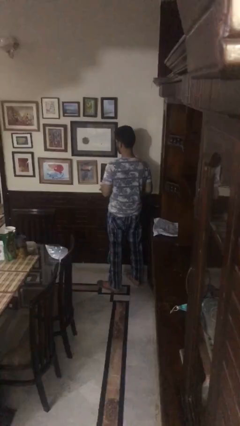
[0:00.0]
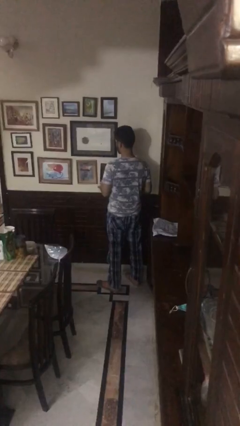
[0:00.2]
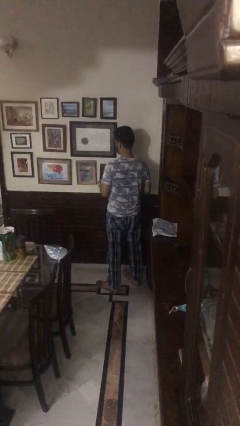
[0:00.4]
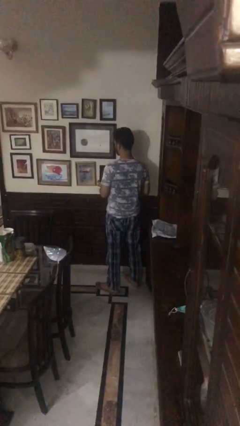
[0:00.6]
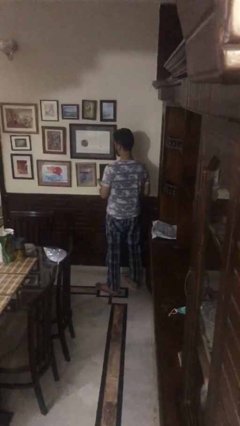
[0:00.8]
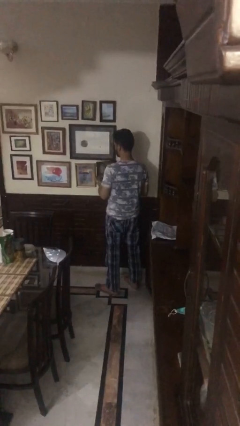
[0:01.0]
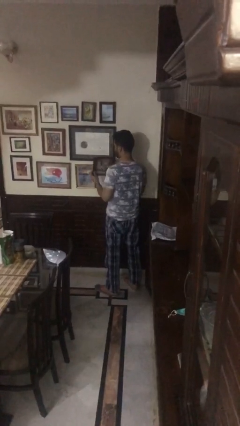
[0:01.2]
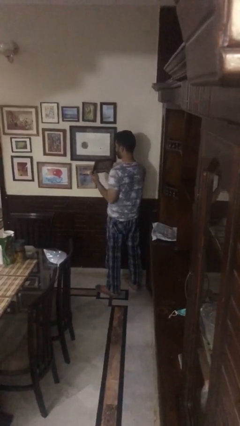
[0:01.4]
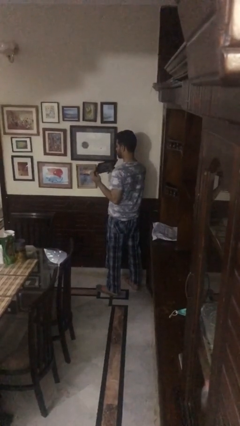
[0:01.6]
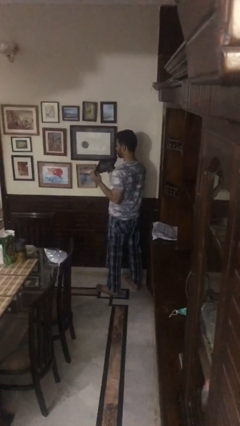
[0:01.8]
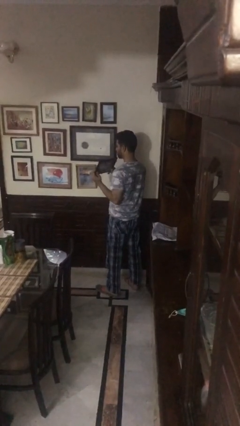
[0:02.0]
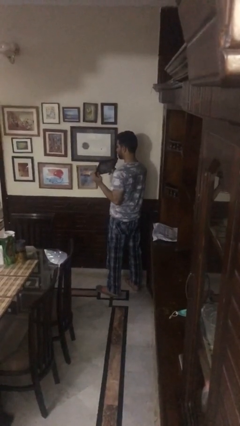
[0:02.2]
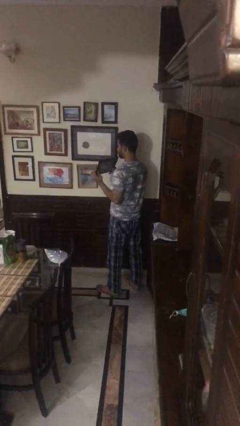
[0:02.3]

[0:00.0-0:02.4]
person takes down picture frame

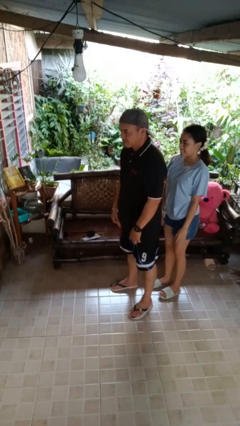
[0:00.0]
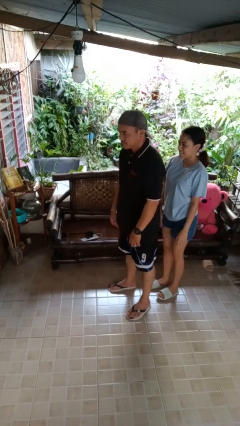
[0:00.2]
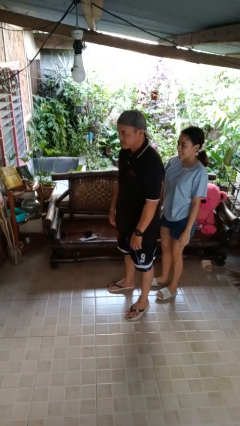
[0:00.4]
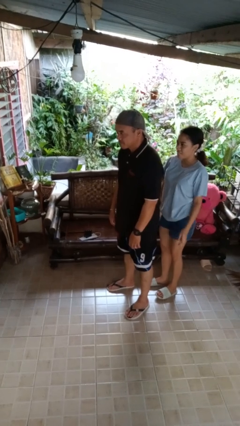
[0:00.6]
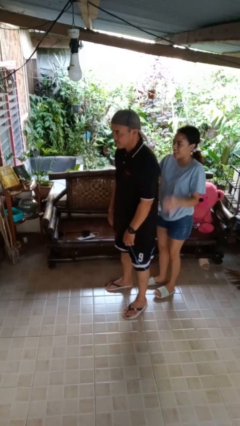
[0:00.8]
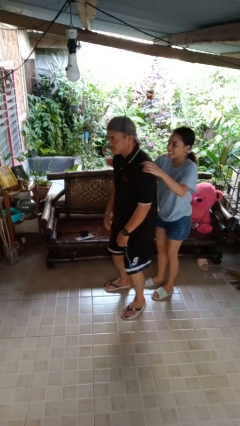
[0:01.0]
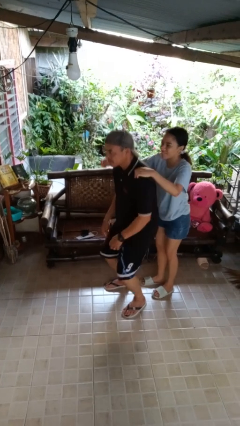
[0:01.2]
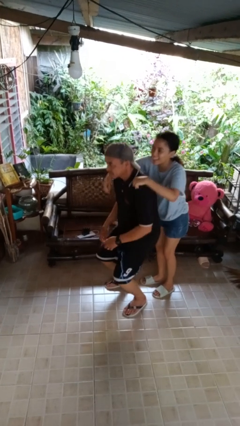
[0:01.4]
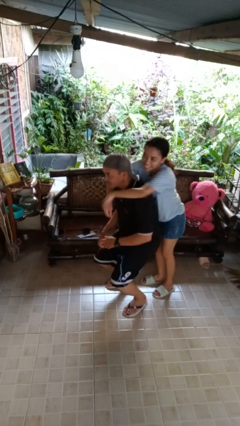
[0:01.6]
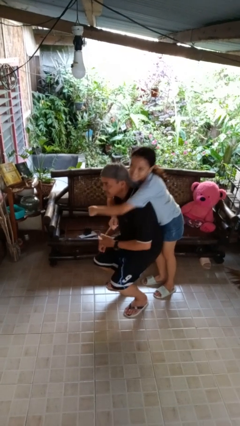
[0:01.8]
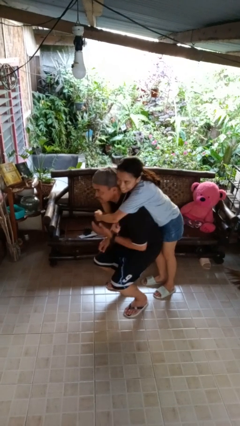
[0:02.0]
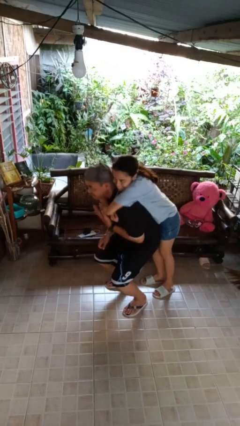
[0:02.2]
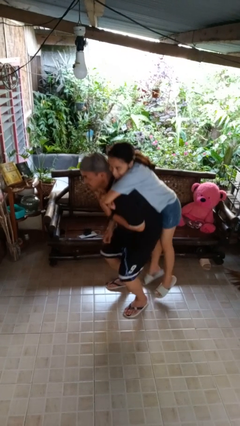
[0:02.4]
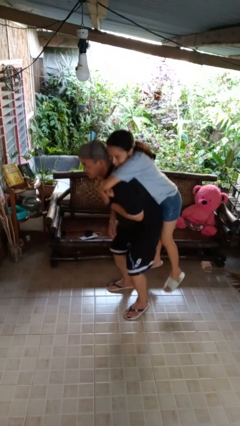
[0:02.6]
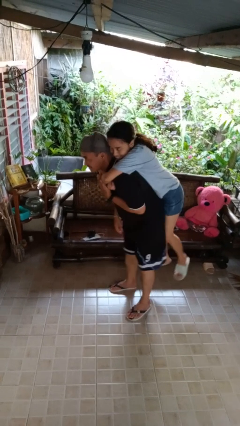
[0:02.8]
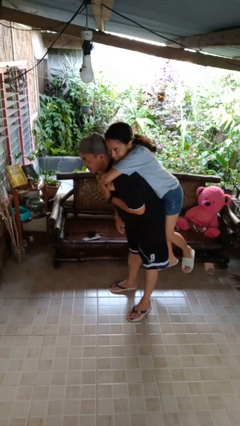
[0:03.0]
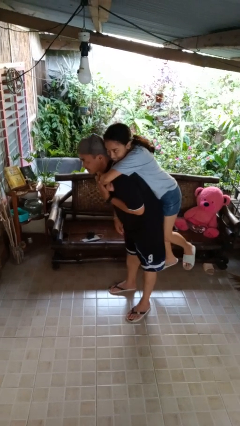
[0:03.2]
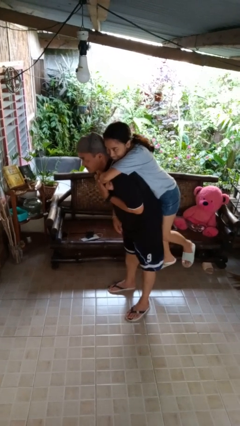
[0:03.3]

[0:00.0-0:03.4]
person picks up person

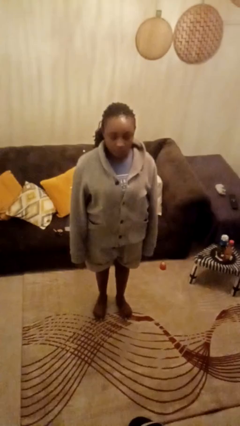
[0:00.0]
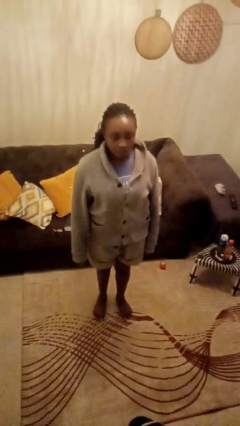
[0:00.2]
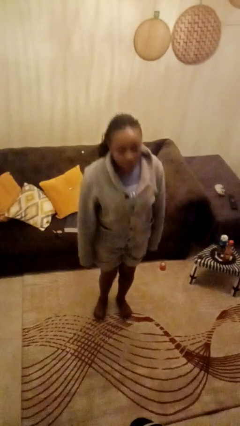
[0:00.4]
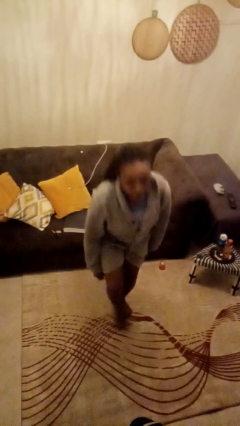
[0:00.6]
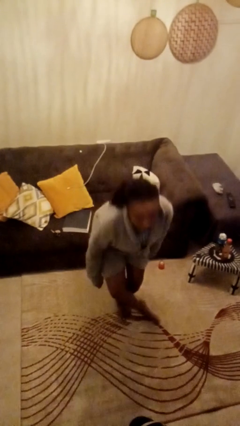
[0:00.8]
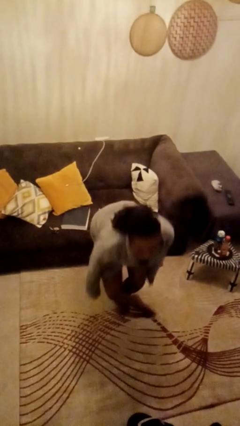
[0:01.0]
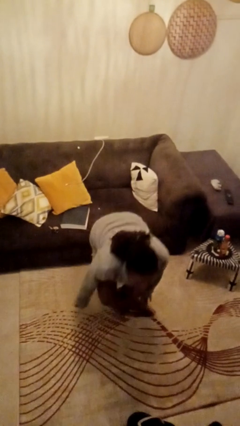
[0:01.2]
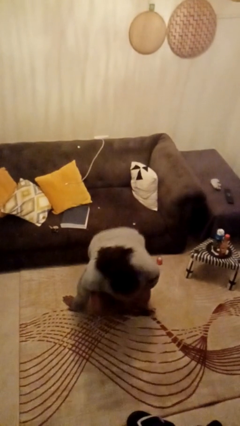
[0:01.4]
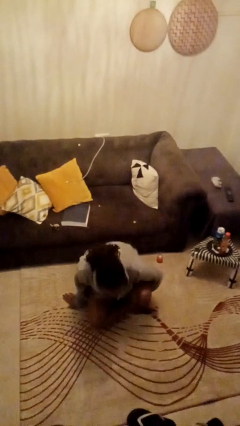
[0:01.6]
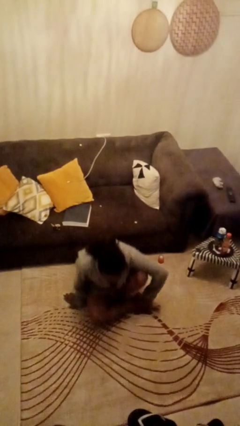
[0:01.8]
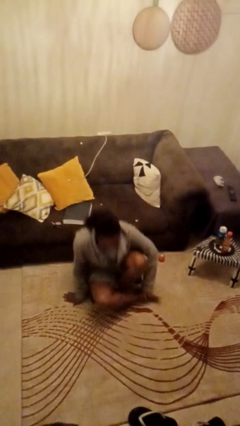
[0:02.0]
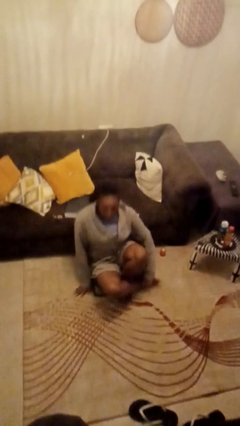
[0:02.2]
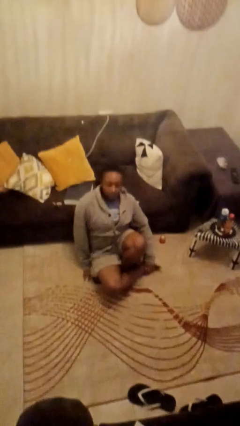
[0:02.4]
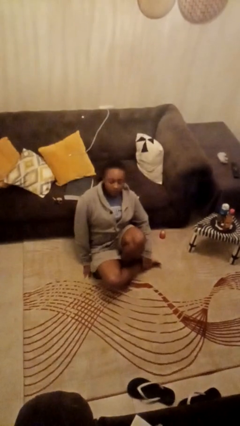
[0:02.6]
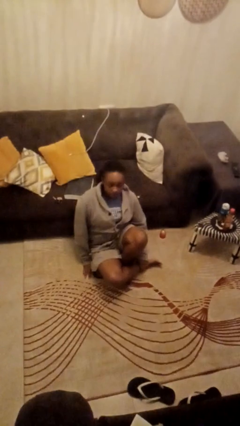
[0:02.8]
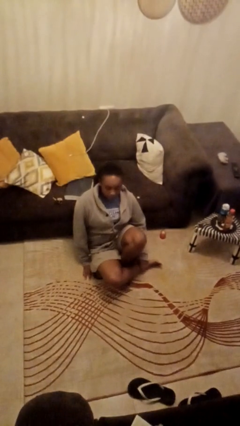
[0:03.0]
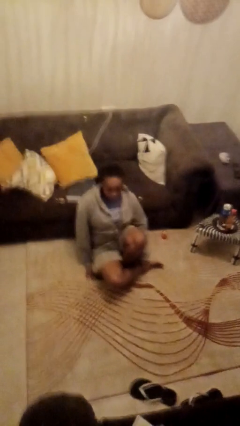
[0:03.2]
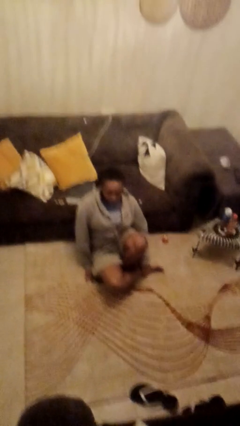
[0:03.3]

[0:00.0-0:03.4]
person sits crisscross

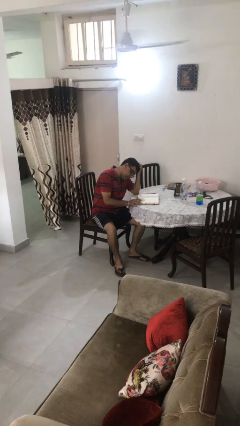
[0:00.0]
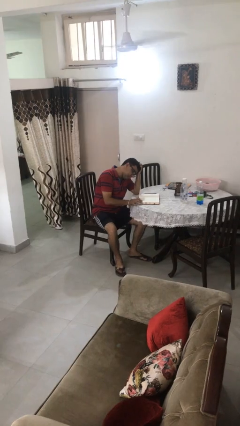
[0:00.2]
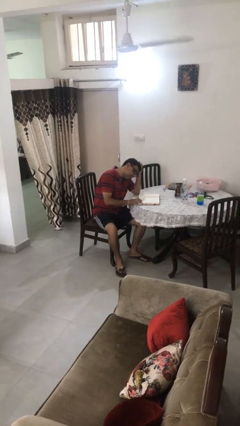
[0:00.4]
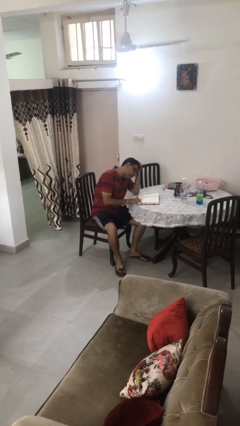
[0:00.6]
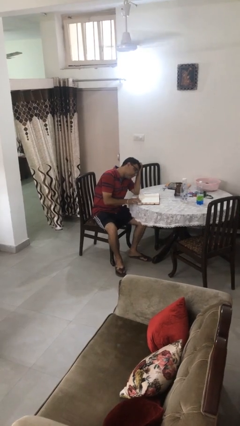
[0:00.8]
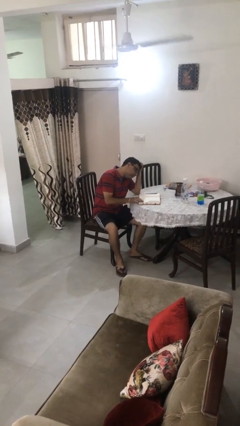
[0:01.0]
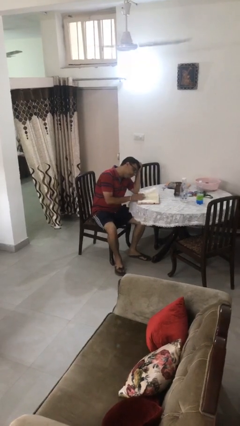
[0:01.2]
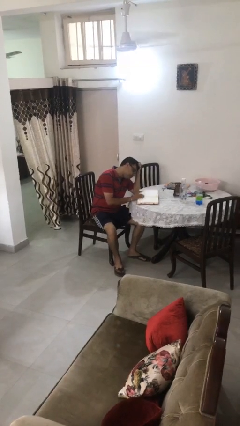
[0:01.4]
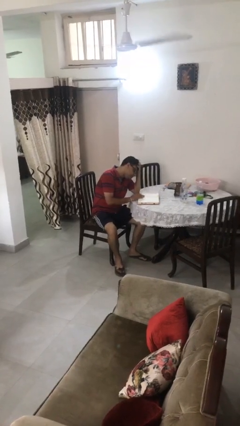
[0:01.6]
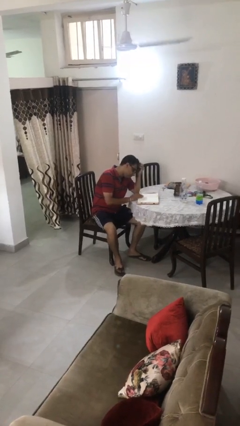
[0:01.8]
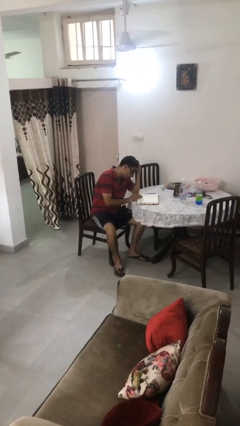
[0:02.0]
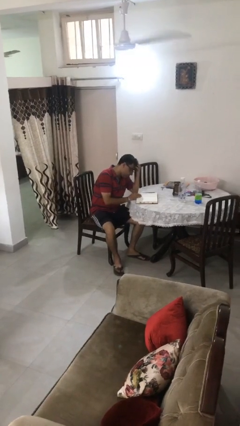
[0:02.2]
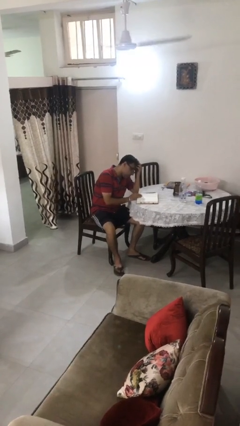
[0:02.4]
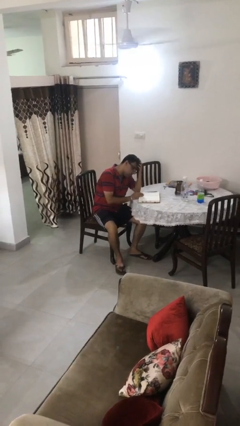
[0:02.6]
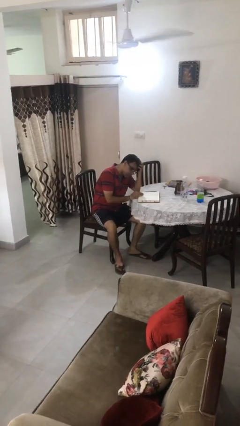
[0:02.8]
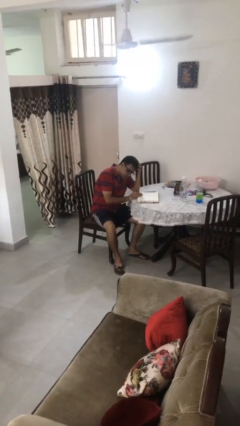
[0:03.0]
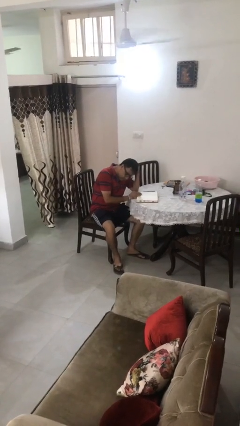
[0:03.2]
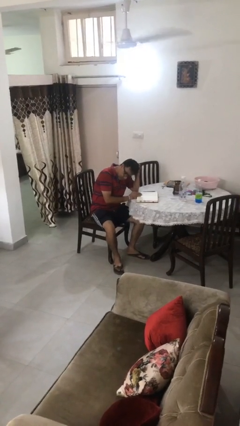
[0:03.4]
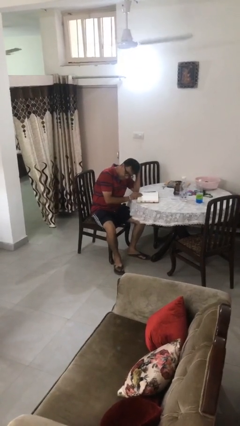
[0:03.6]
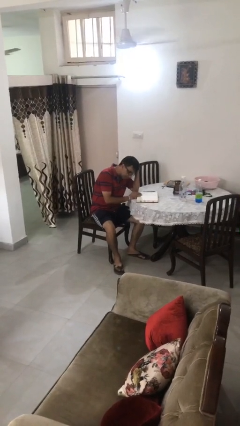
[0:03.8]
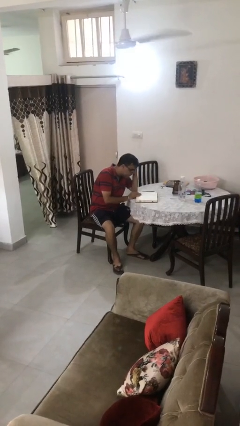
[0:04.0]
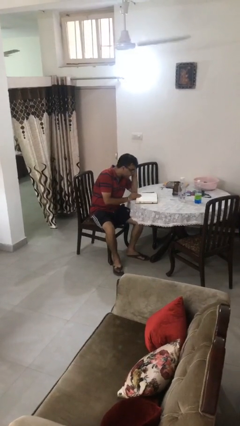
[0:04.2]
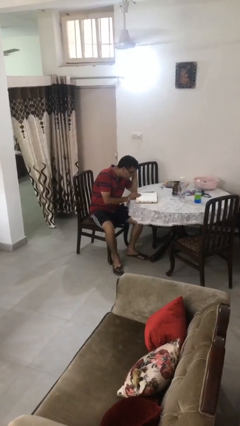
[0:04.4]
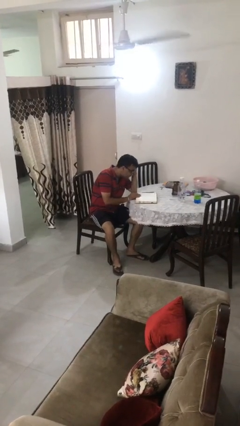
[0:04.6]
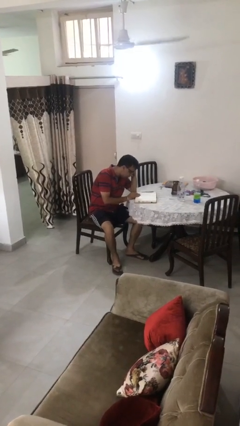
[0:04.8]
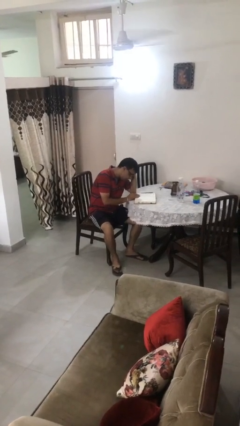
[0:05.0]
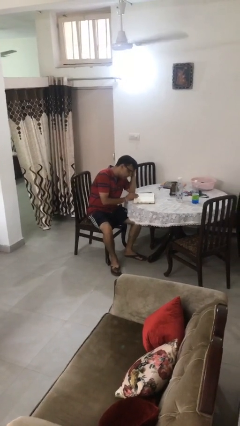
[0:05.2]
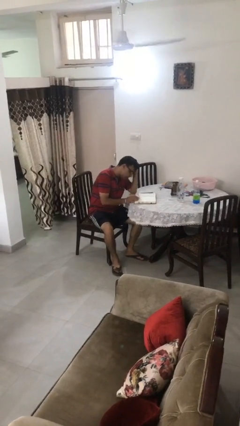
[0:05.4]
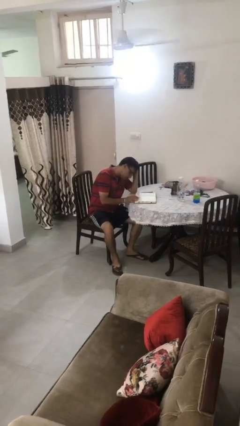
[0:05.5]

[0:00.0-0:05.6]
person reads document

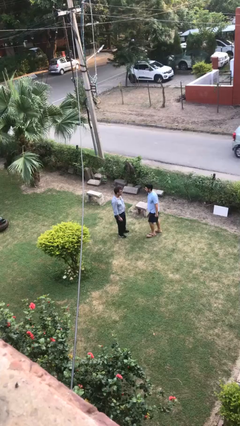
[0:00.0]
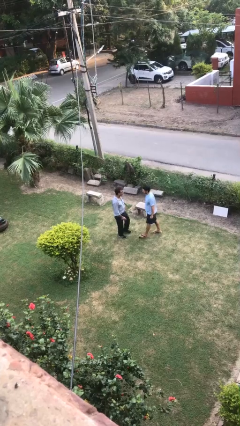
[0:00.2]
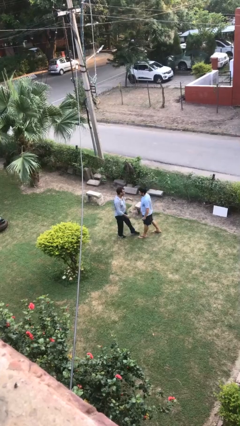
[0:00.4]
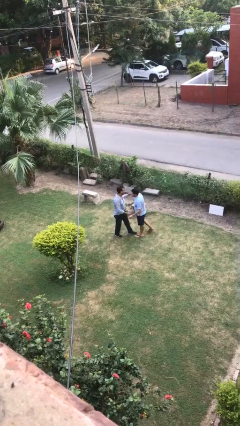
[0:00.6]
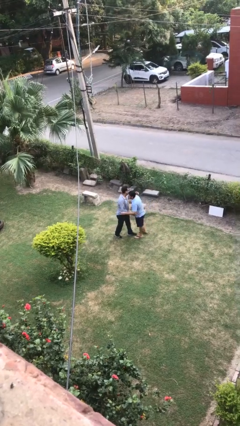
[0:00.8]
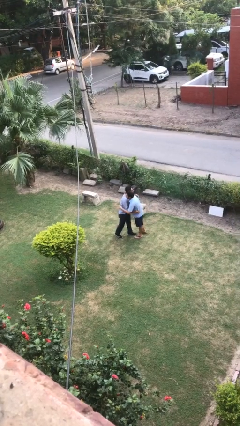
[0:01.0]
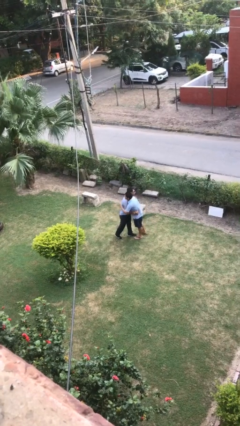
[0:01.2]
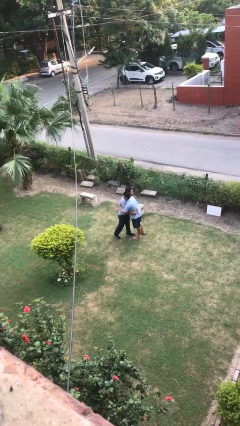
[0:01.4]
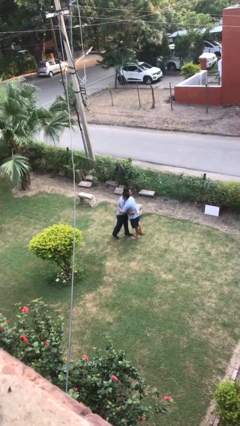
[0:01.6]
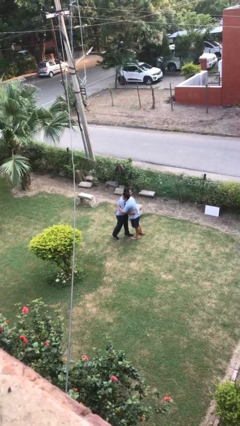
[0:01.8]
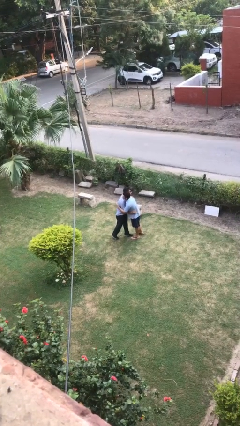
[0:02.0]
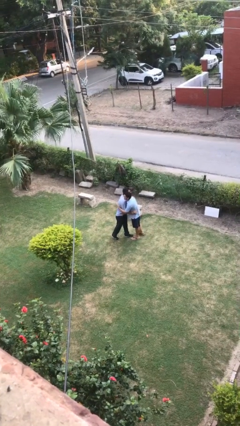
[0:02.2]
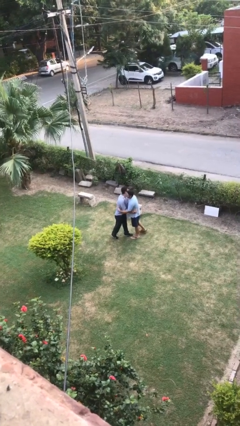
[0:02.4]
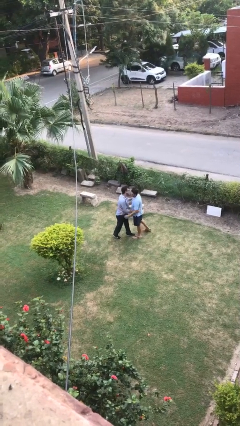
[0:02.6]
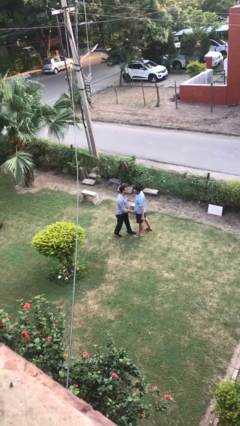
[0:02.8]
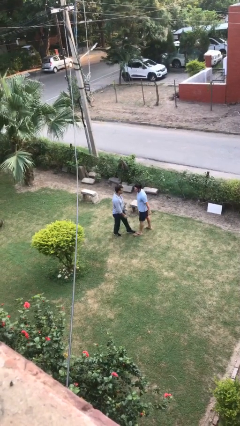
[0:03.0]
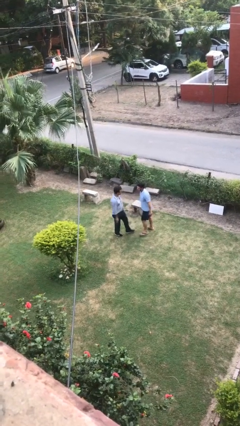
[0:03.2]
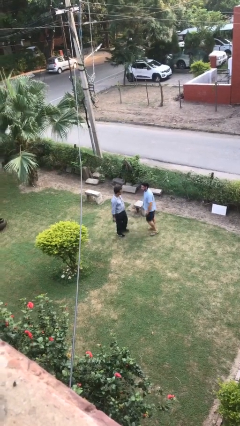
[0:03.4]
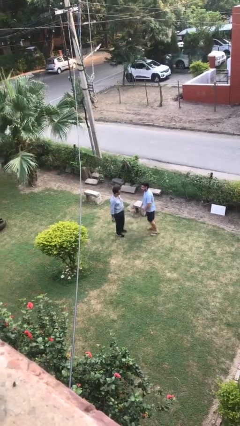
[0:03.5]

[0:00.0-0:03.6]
person embraces person
